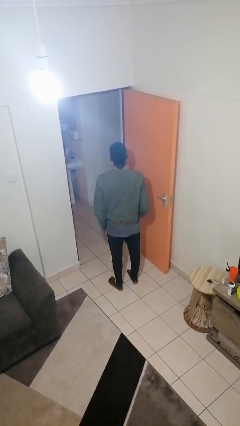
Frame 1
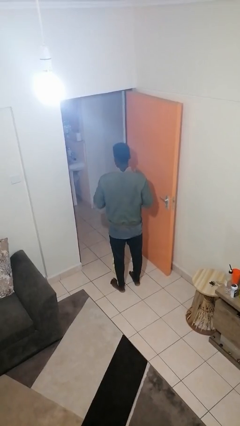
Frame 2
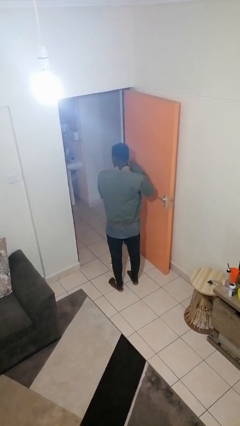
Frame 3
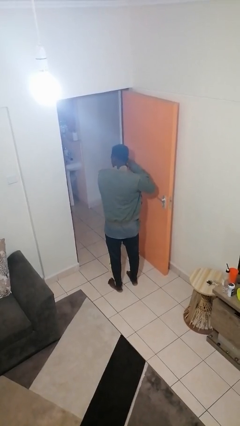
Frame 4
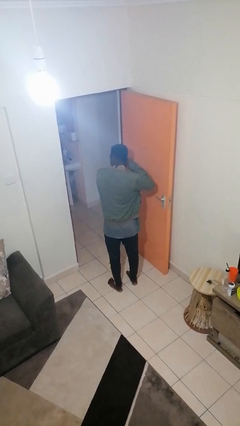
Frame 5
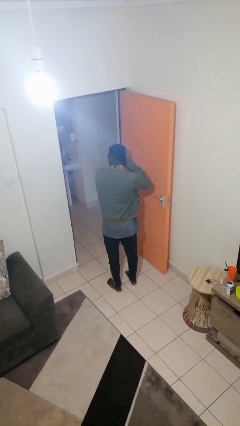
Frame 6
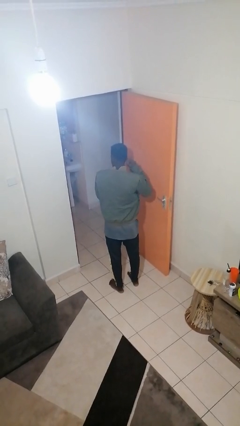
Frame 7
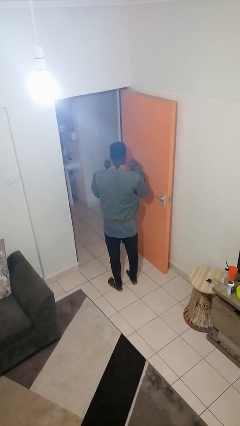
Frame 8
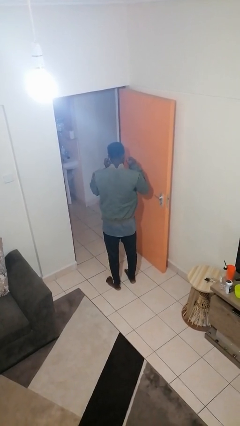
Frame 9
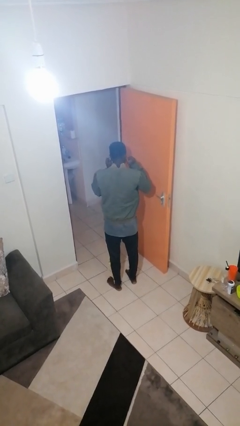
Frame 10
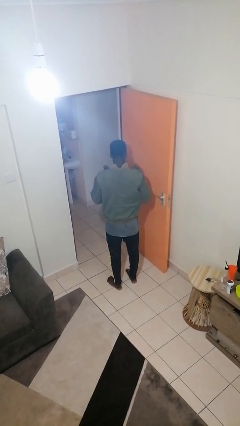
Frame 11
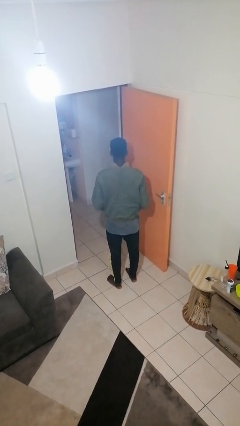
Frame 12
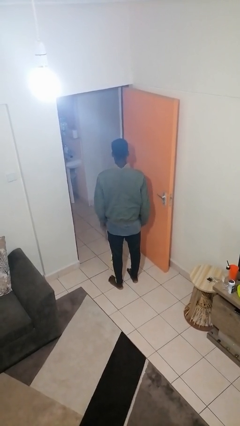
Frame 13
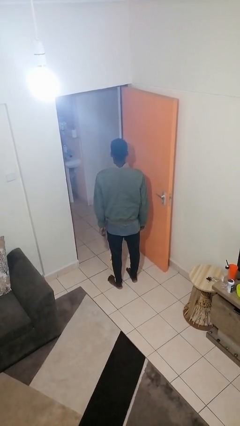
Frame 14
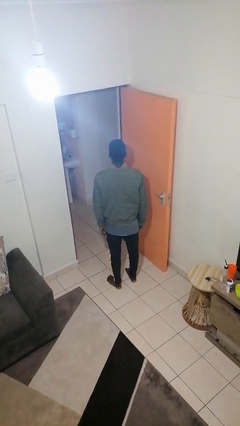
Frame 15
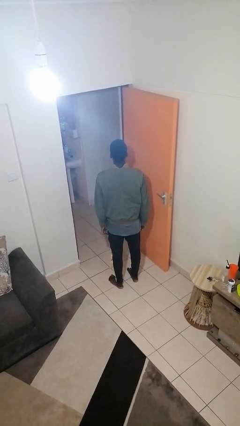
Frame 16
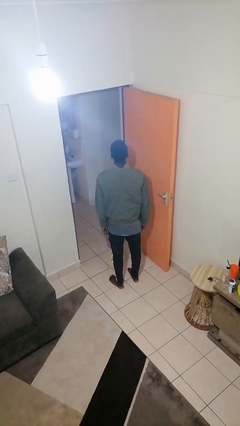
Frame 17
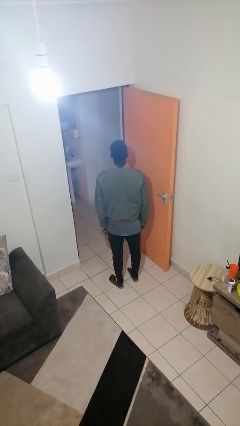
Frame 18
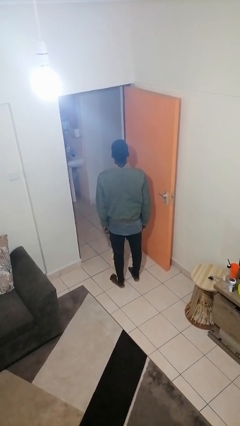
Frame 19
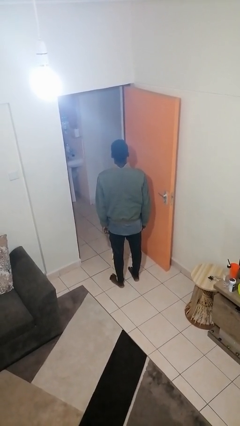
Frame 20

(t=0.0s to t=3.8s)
person puts on earrings

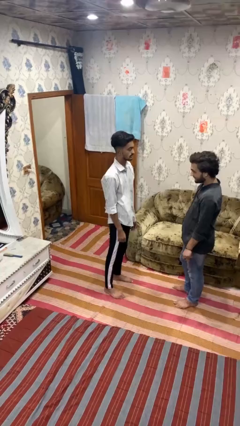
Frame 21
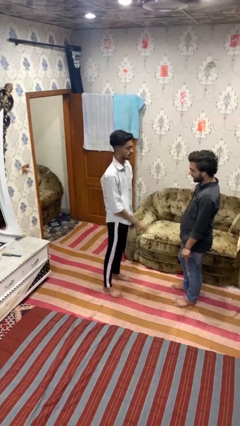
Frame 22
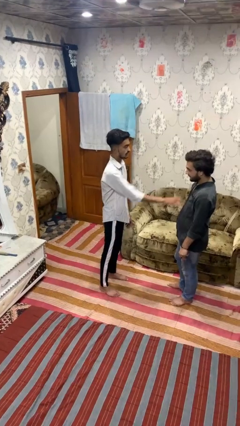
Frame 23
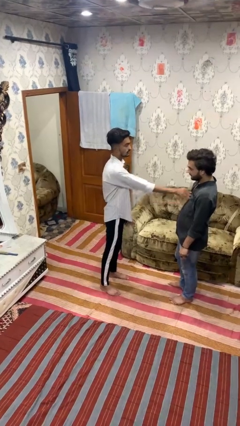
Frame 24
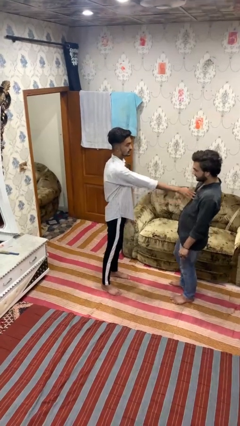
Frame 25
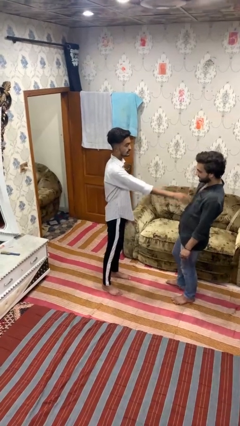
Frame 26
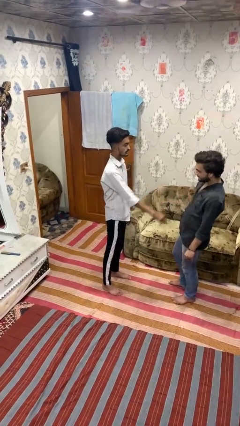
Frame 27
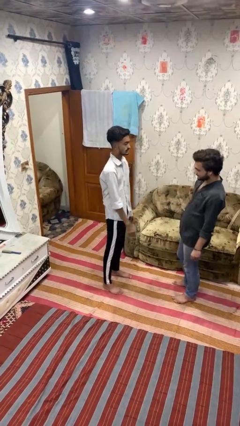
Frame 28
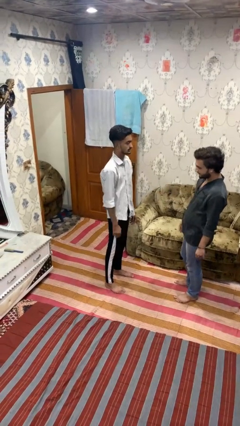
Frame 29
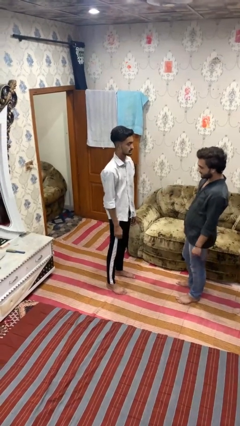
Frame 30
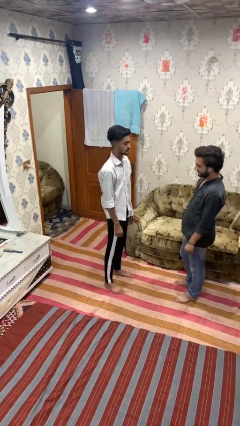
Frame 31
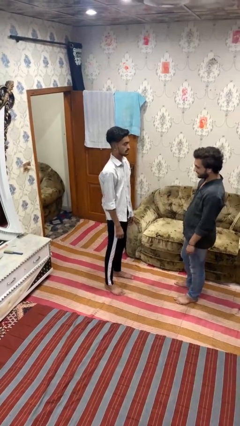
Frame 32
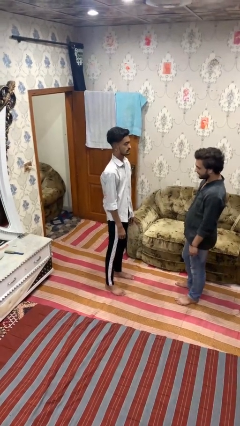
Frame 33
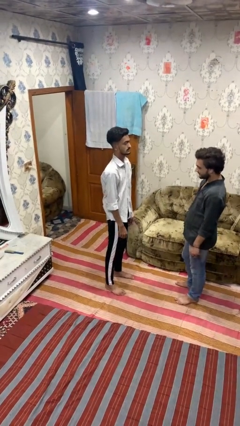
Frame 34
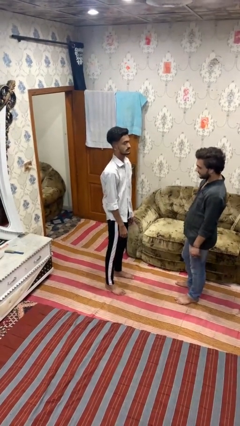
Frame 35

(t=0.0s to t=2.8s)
person shoves person

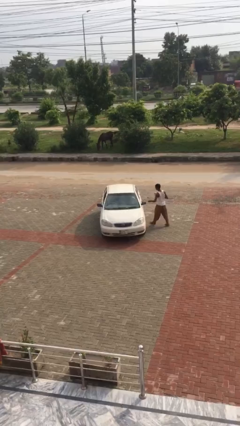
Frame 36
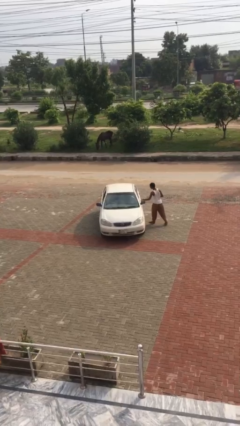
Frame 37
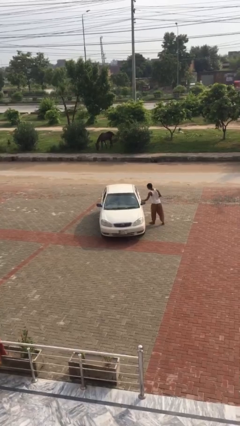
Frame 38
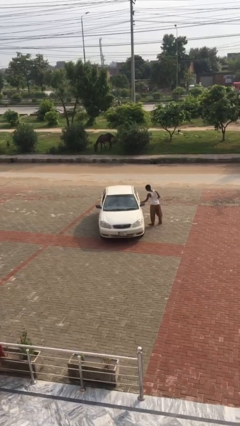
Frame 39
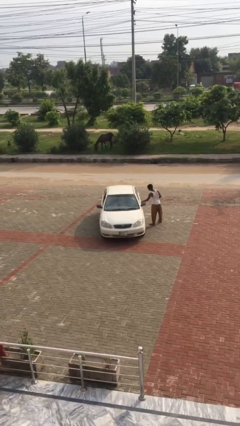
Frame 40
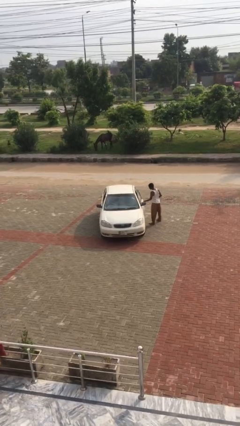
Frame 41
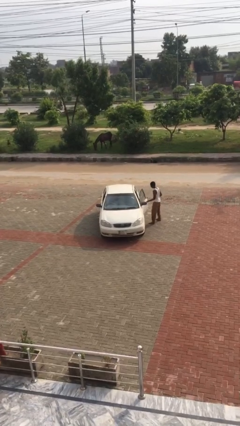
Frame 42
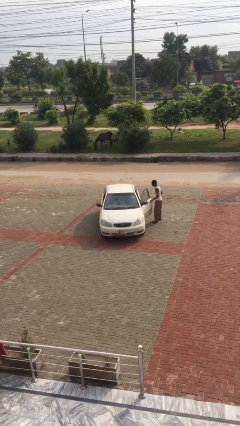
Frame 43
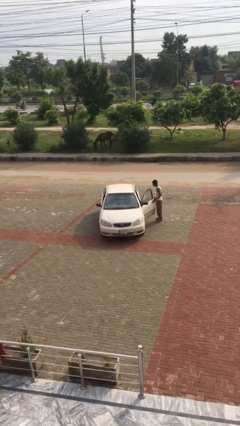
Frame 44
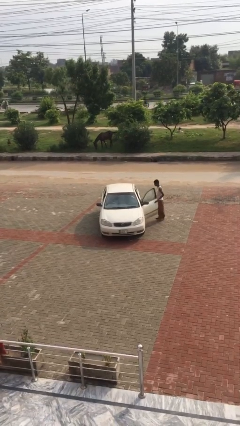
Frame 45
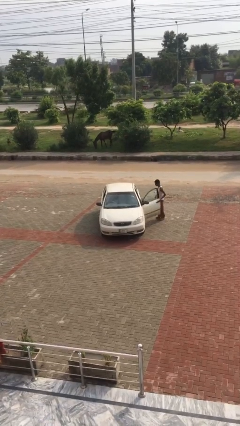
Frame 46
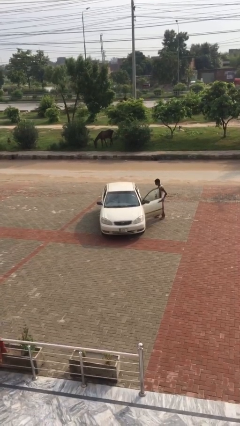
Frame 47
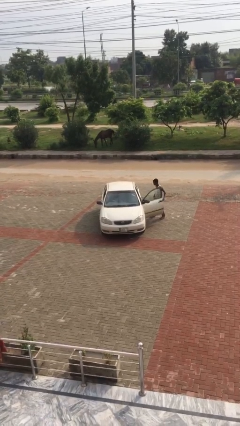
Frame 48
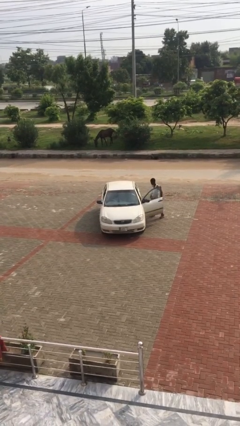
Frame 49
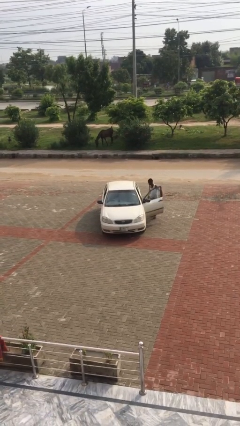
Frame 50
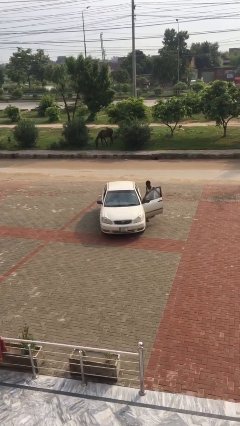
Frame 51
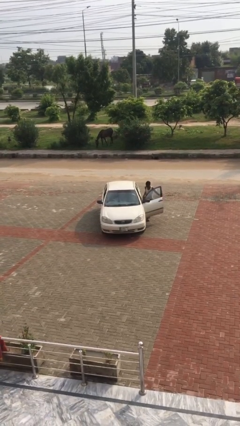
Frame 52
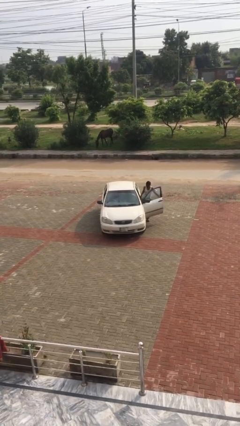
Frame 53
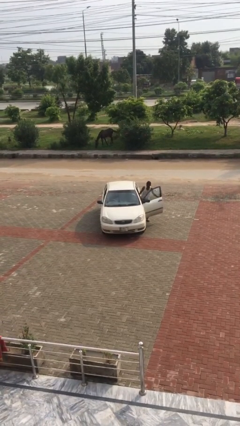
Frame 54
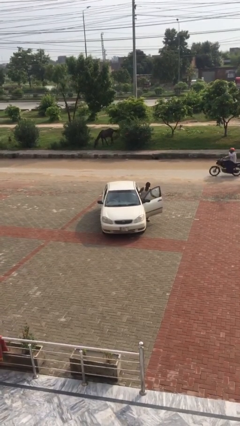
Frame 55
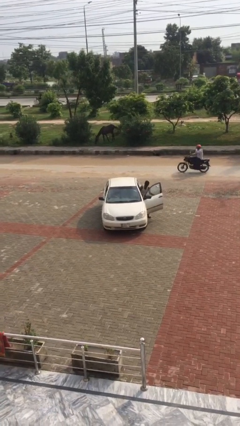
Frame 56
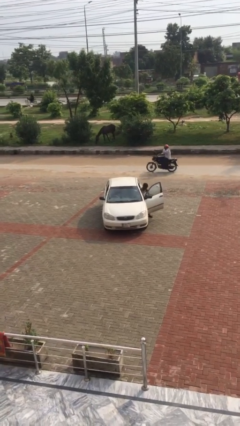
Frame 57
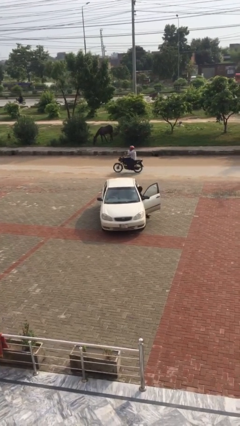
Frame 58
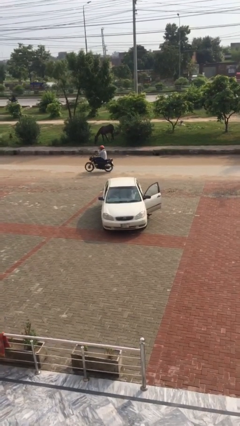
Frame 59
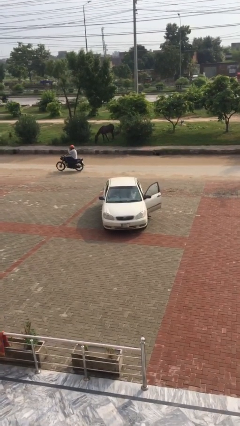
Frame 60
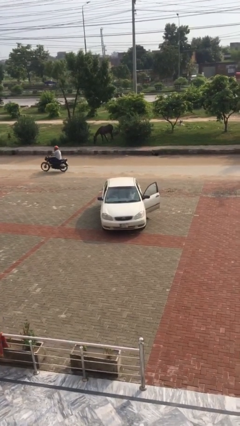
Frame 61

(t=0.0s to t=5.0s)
car picks up person

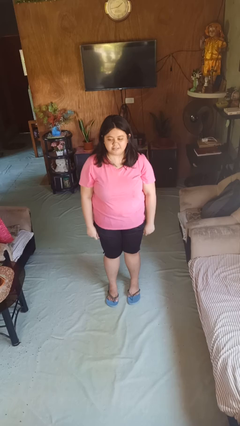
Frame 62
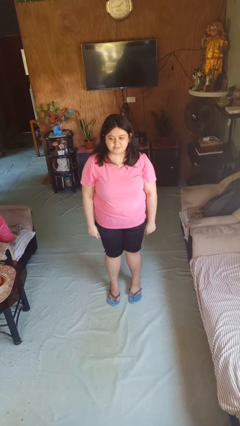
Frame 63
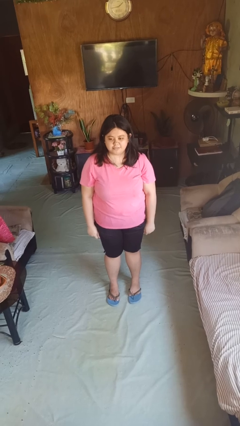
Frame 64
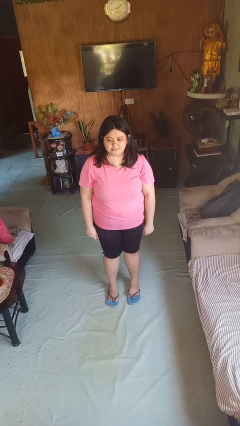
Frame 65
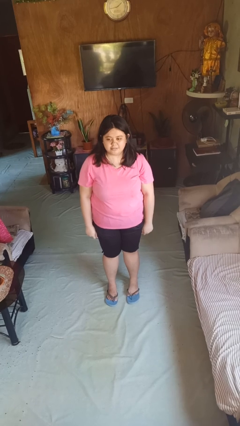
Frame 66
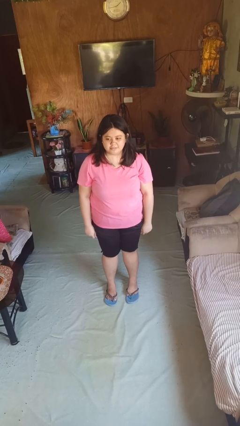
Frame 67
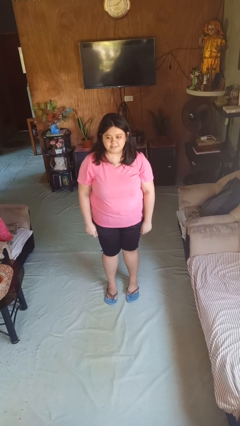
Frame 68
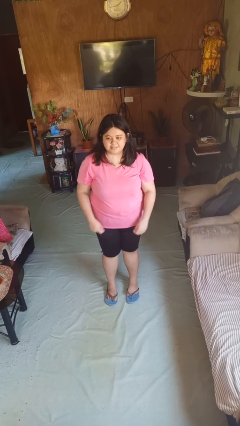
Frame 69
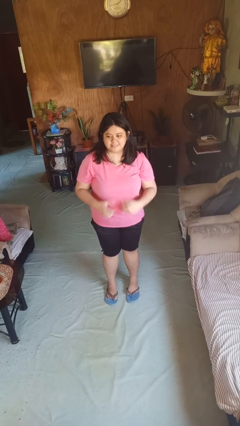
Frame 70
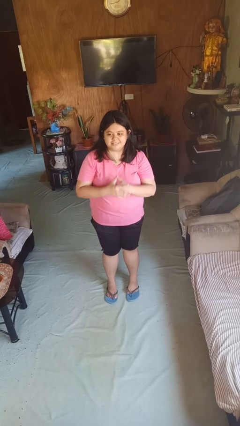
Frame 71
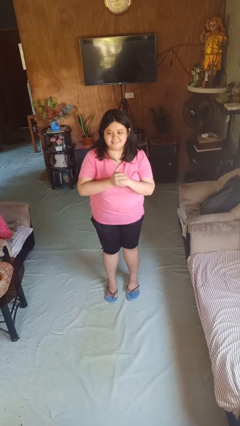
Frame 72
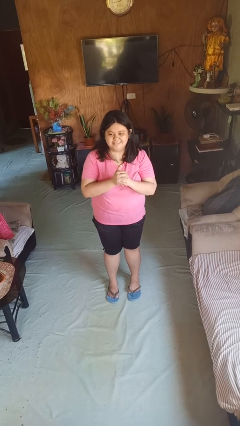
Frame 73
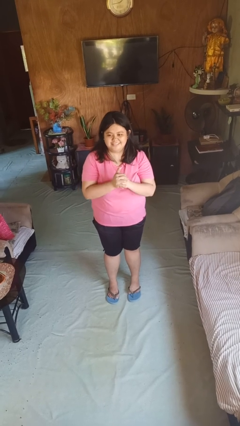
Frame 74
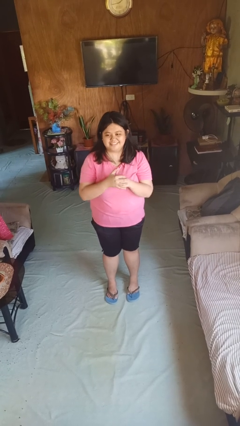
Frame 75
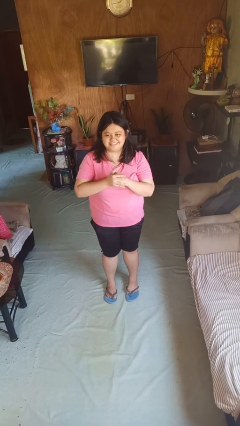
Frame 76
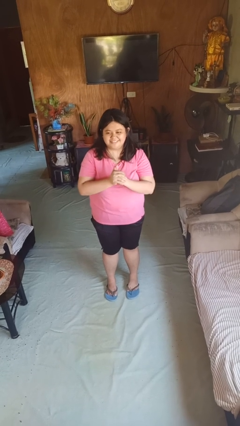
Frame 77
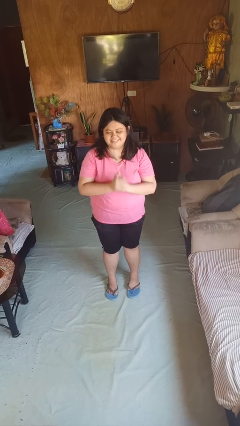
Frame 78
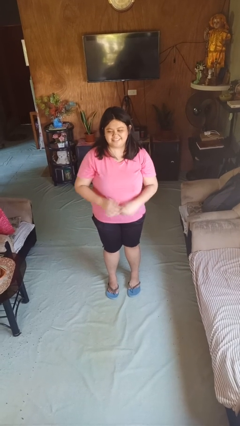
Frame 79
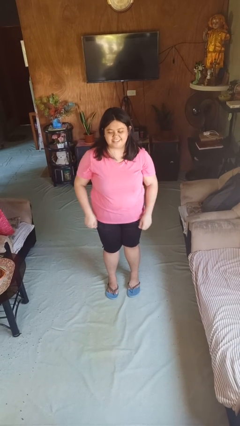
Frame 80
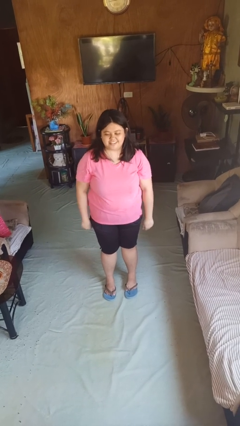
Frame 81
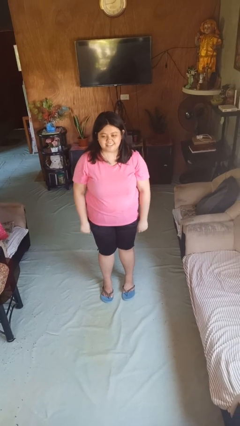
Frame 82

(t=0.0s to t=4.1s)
person cracks knuckles

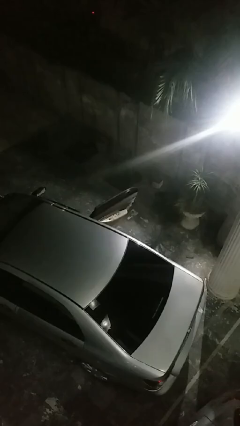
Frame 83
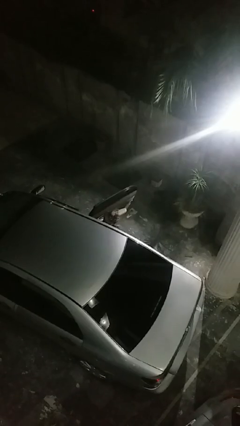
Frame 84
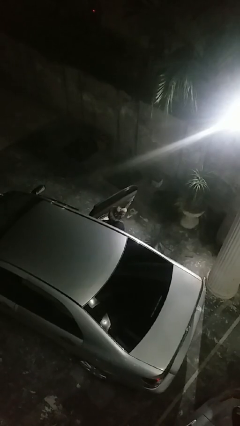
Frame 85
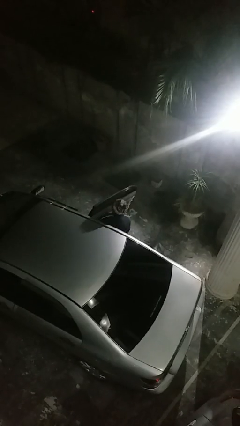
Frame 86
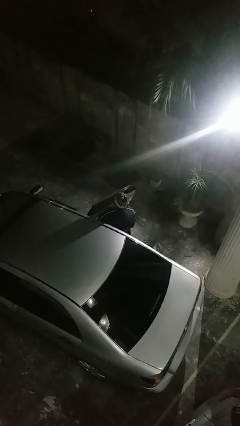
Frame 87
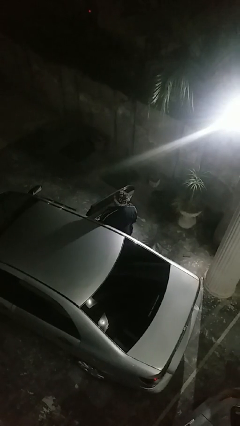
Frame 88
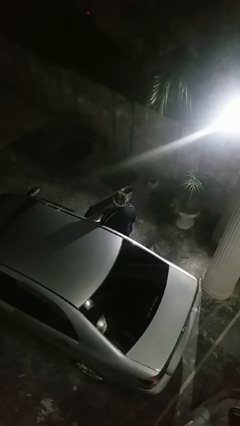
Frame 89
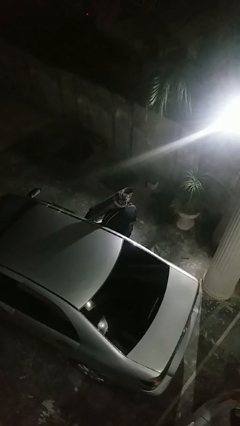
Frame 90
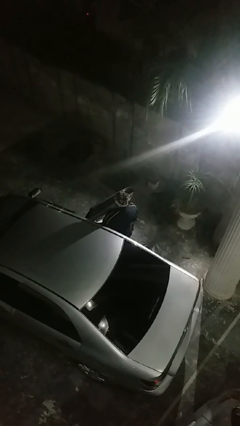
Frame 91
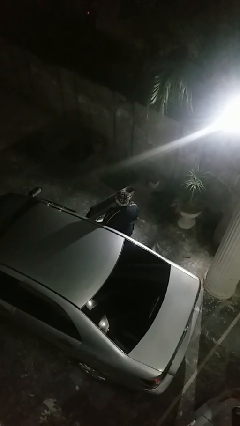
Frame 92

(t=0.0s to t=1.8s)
person exits car
